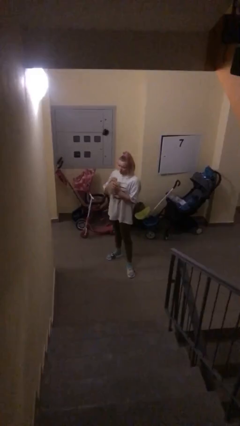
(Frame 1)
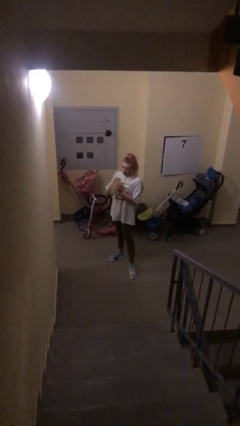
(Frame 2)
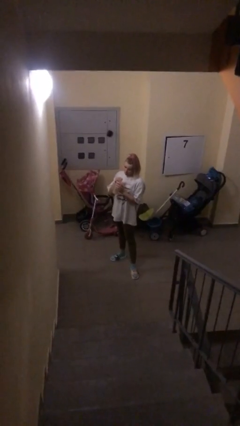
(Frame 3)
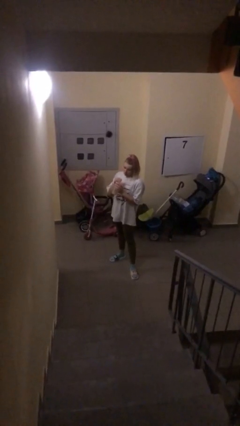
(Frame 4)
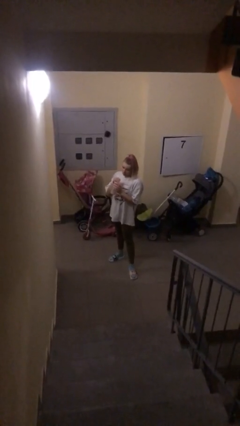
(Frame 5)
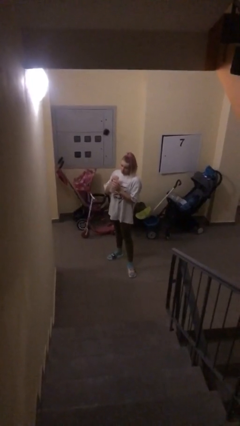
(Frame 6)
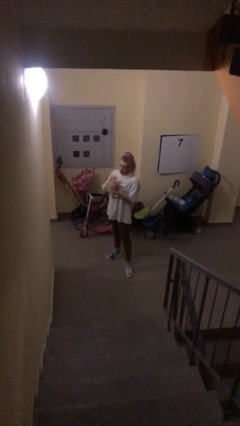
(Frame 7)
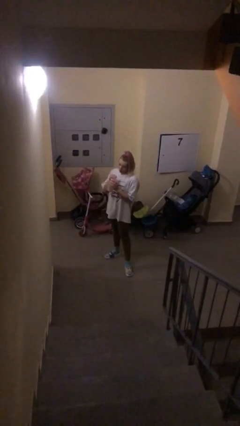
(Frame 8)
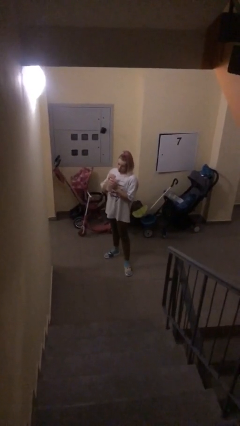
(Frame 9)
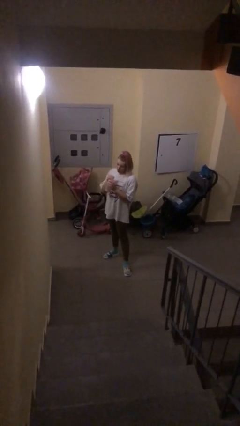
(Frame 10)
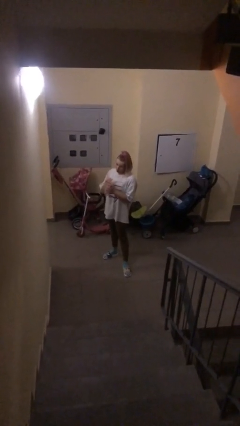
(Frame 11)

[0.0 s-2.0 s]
person drinks from straw

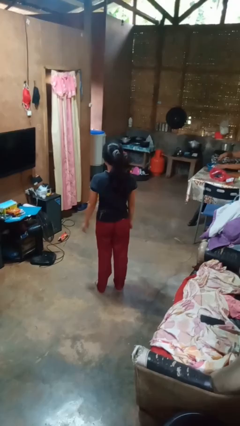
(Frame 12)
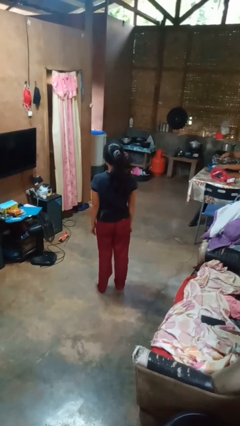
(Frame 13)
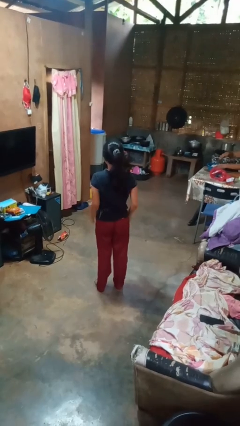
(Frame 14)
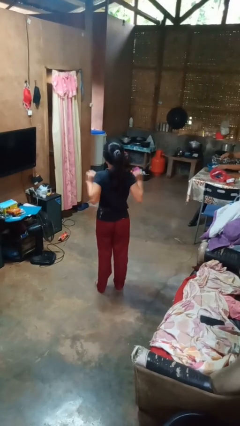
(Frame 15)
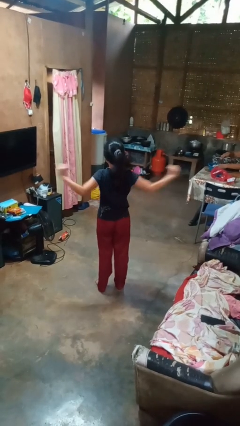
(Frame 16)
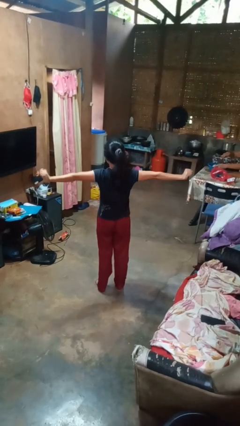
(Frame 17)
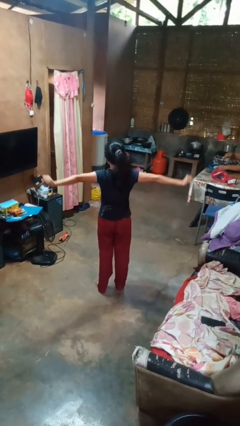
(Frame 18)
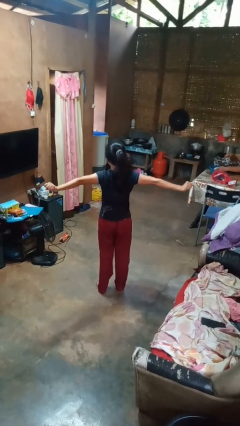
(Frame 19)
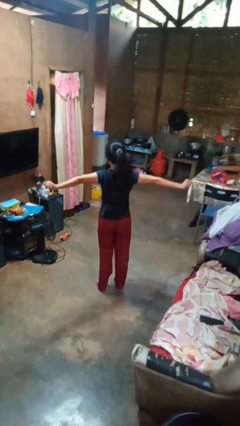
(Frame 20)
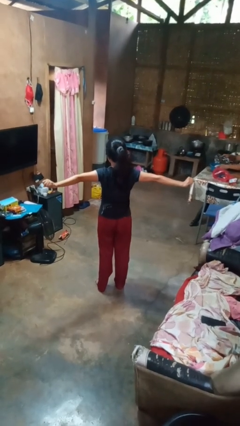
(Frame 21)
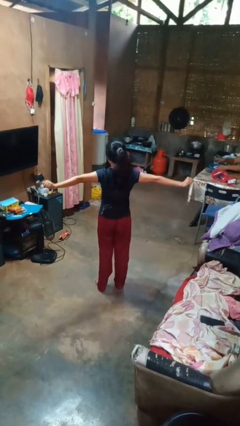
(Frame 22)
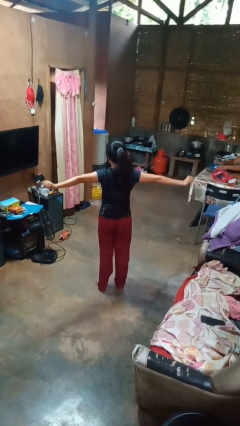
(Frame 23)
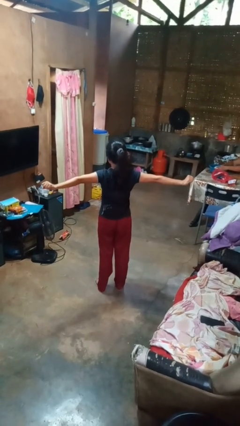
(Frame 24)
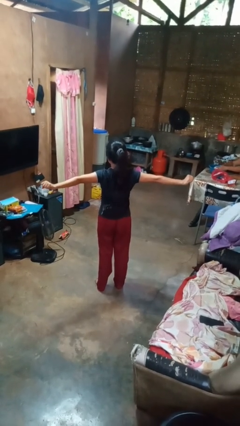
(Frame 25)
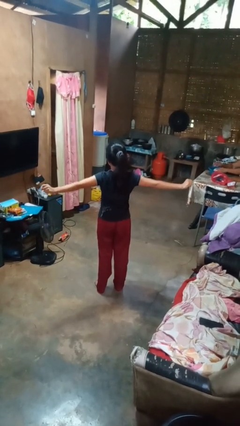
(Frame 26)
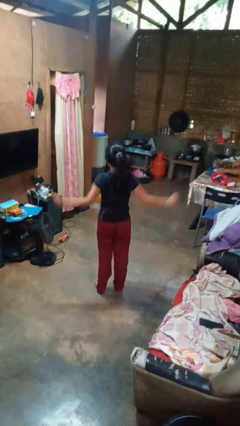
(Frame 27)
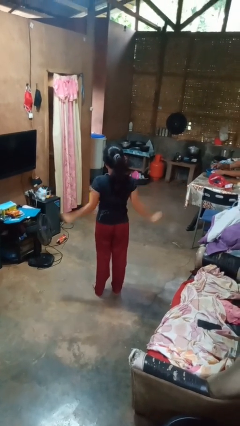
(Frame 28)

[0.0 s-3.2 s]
person stretches arms to side

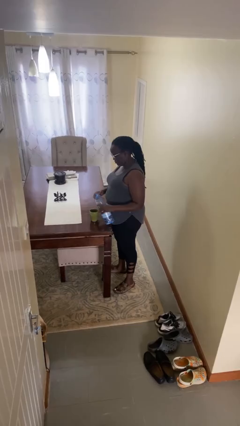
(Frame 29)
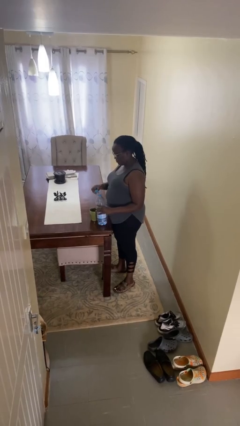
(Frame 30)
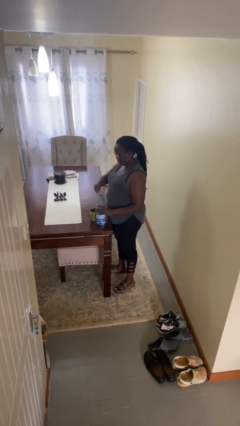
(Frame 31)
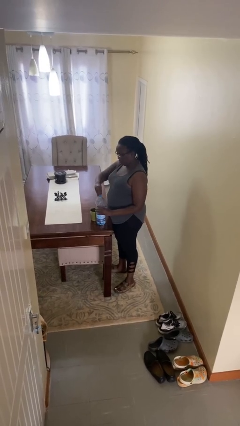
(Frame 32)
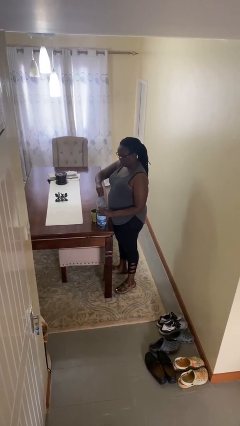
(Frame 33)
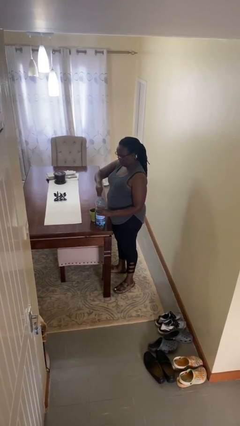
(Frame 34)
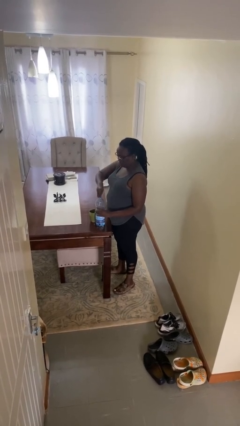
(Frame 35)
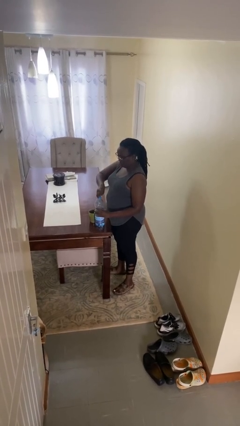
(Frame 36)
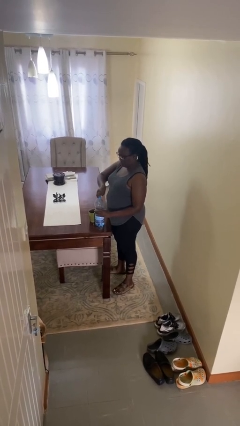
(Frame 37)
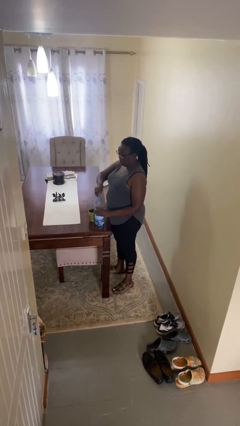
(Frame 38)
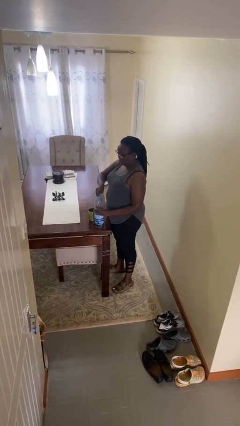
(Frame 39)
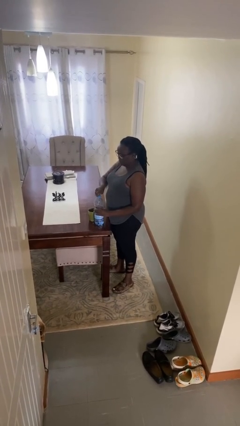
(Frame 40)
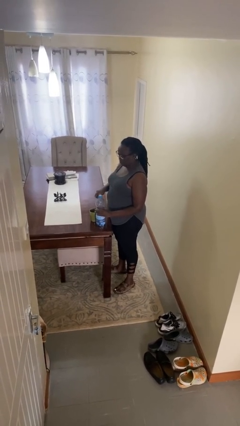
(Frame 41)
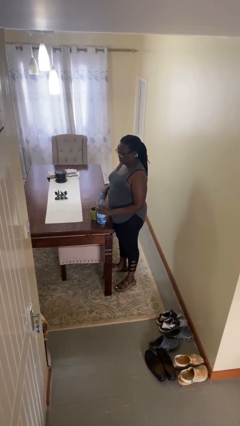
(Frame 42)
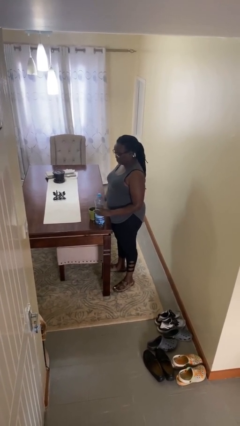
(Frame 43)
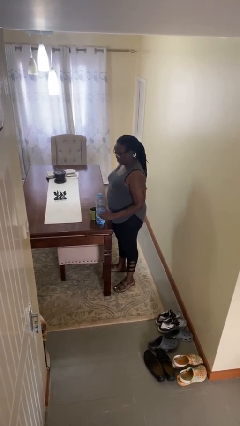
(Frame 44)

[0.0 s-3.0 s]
person screws lid to bottle

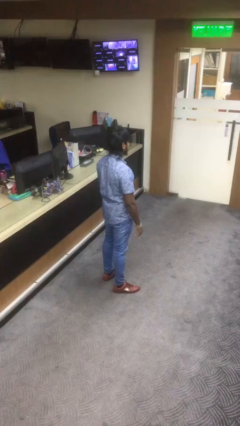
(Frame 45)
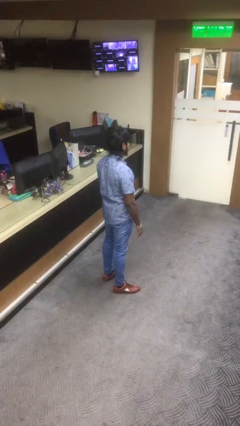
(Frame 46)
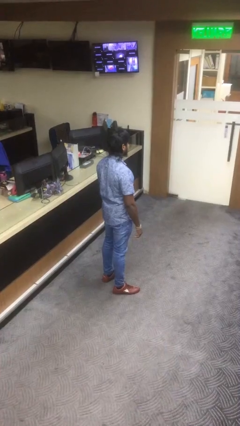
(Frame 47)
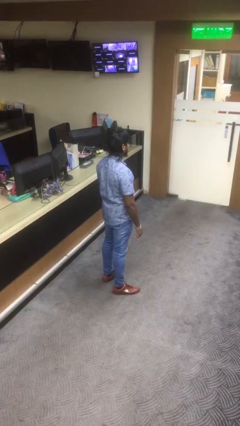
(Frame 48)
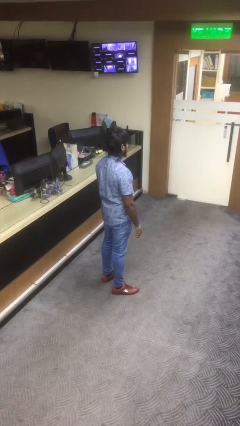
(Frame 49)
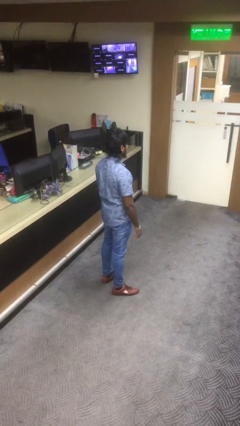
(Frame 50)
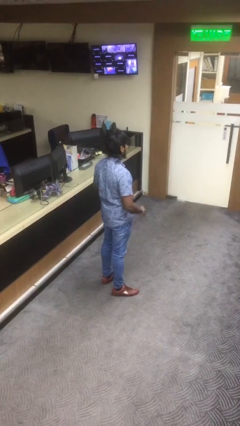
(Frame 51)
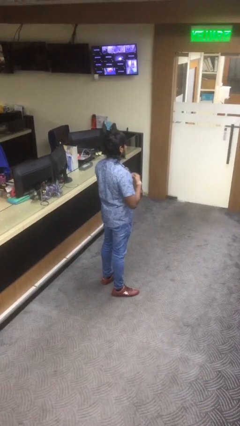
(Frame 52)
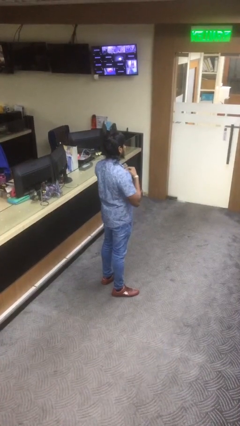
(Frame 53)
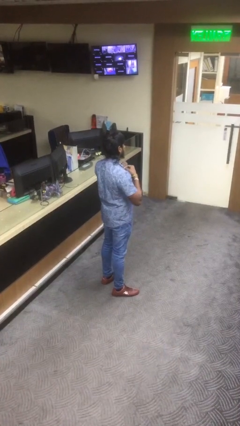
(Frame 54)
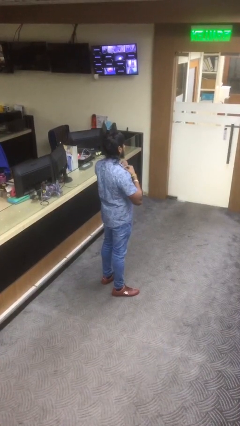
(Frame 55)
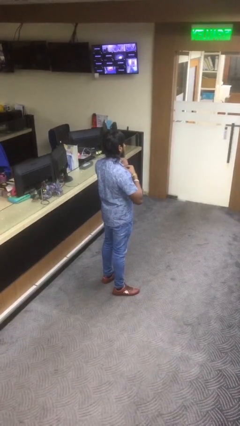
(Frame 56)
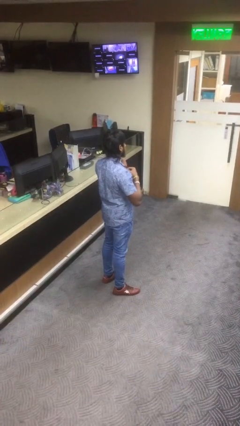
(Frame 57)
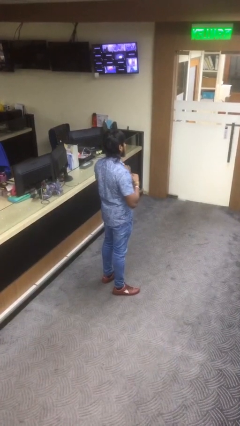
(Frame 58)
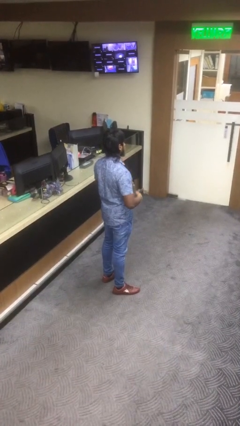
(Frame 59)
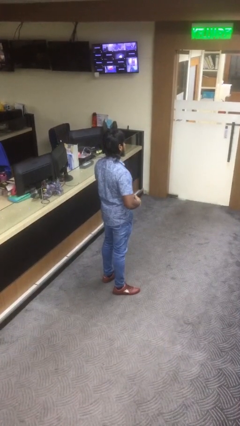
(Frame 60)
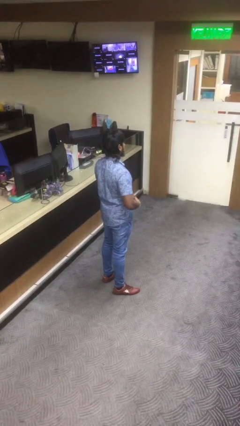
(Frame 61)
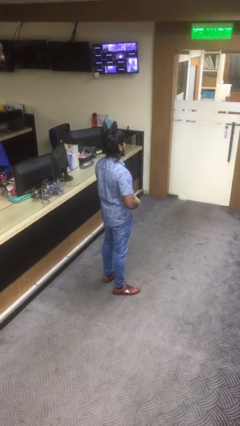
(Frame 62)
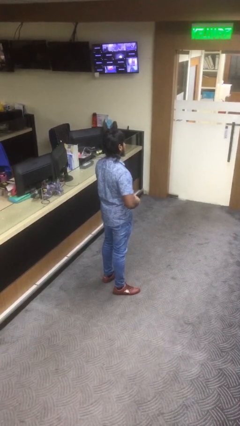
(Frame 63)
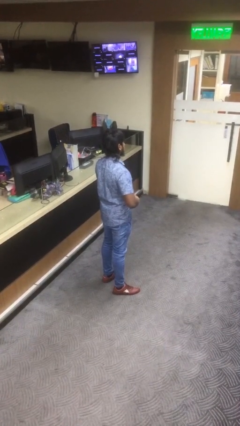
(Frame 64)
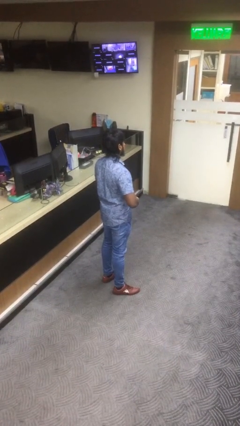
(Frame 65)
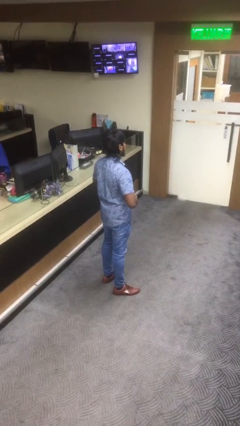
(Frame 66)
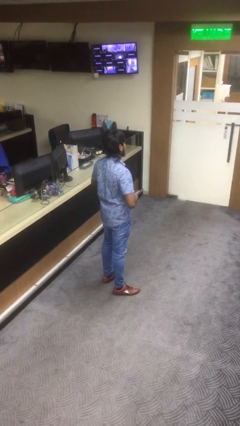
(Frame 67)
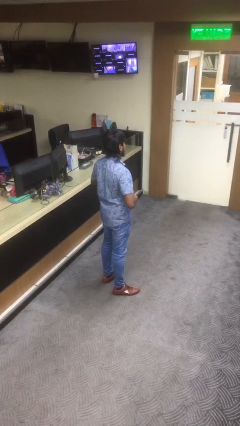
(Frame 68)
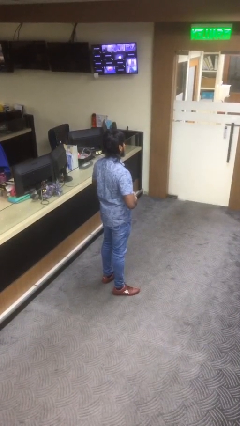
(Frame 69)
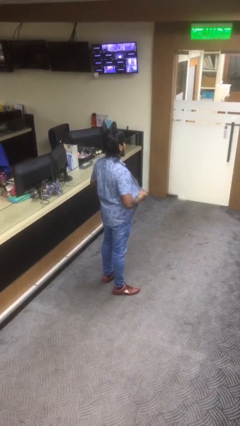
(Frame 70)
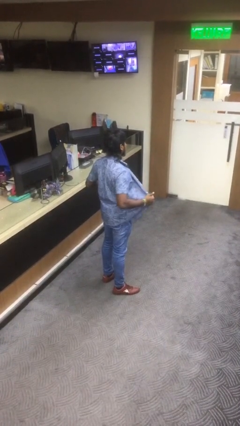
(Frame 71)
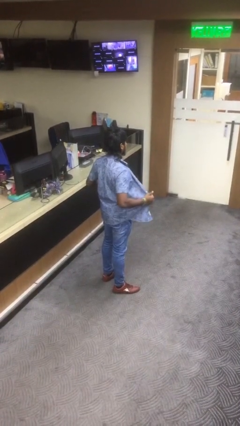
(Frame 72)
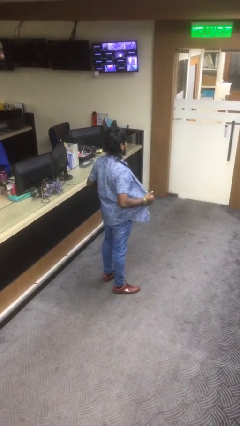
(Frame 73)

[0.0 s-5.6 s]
person unbuttons shirt

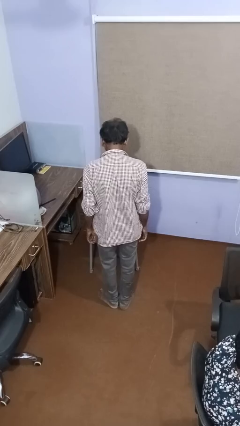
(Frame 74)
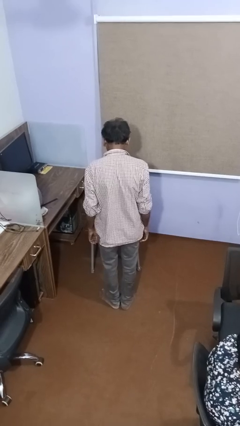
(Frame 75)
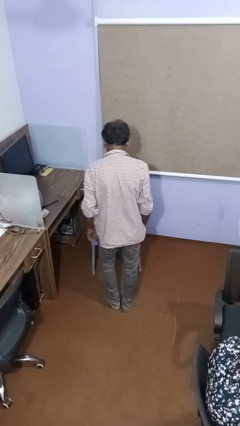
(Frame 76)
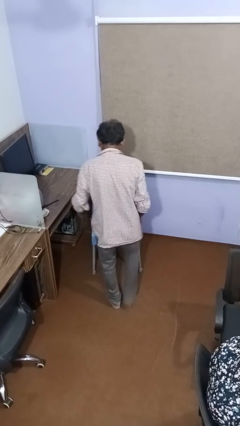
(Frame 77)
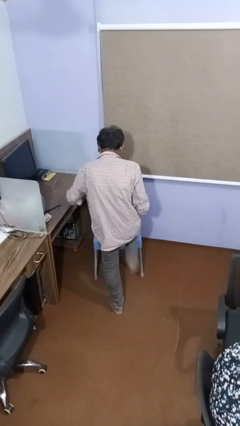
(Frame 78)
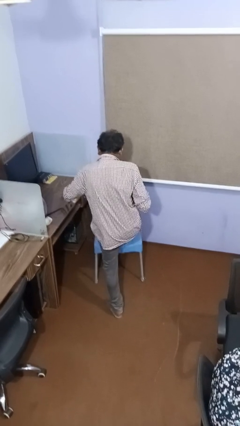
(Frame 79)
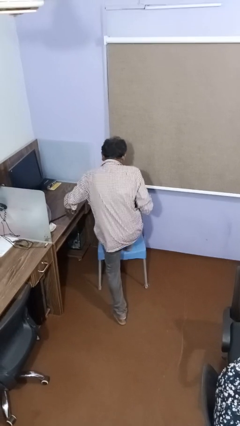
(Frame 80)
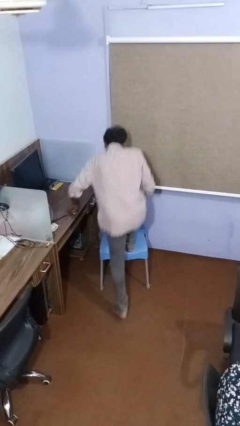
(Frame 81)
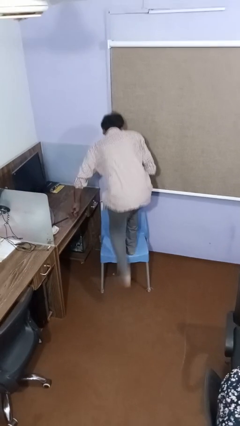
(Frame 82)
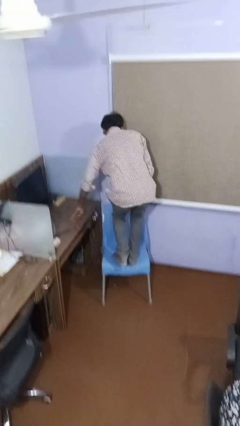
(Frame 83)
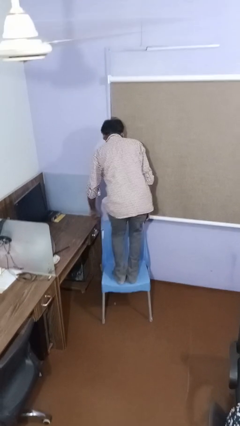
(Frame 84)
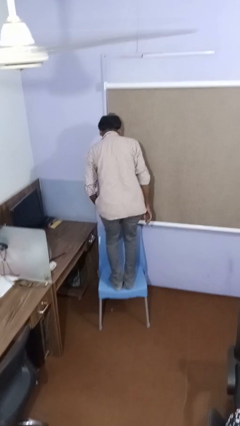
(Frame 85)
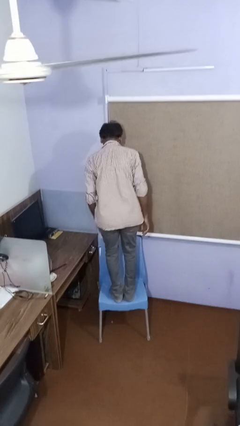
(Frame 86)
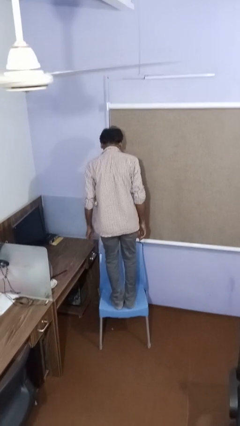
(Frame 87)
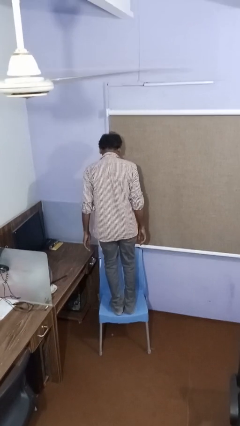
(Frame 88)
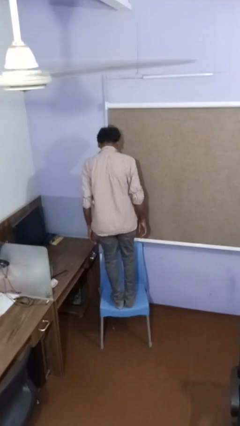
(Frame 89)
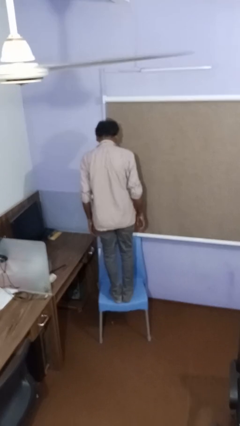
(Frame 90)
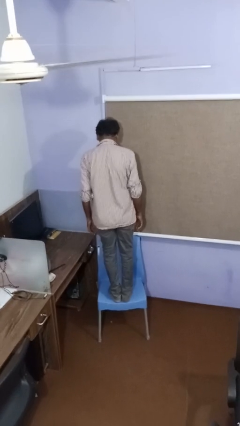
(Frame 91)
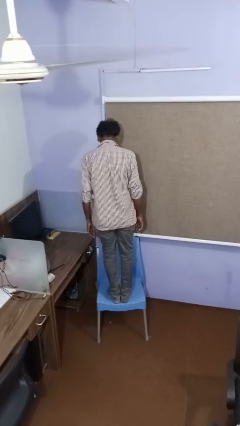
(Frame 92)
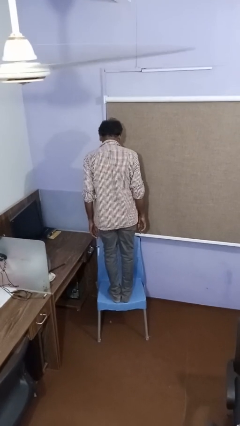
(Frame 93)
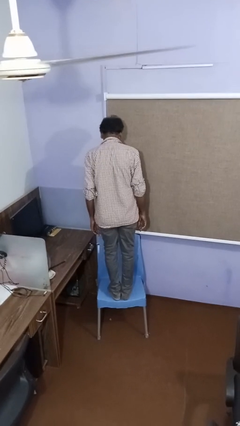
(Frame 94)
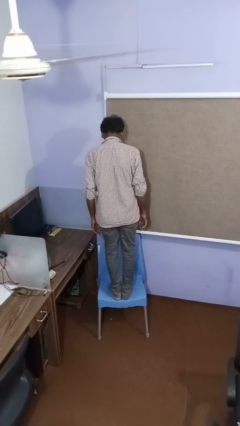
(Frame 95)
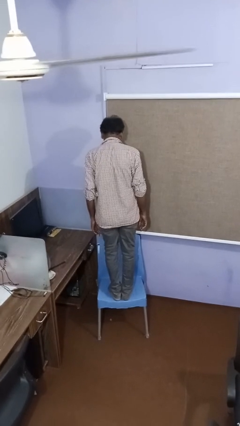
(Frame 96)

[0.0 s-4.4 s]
person climbs on chair
